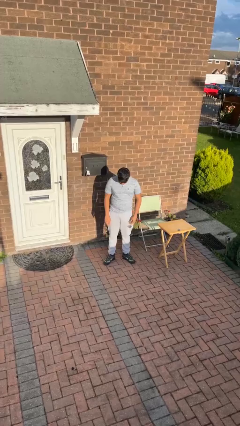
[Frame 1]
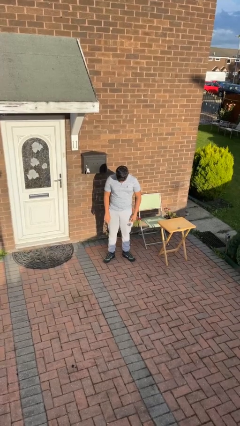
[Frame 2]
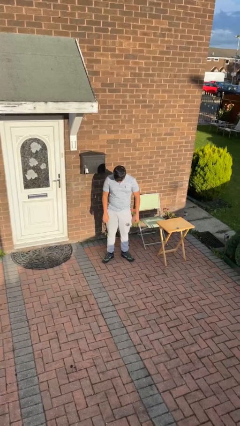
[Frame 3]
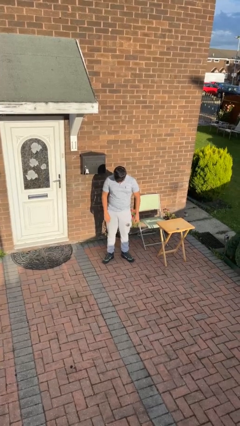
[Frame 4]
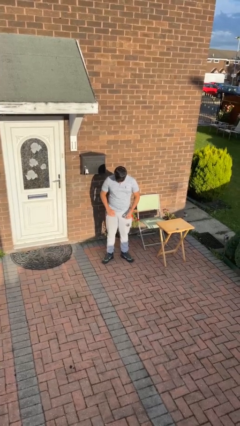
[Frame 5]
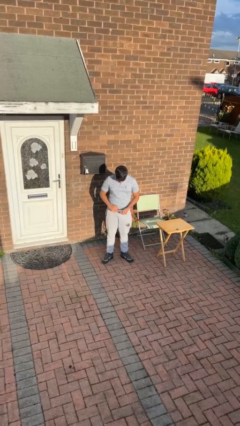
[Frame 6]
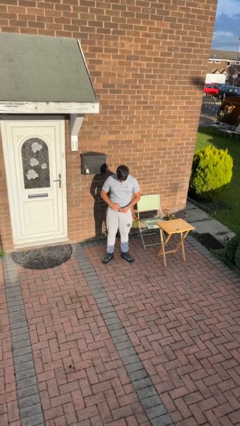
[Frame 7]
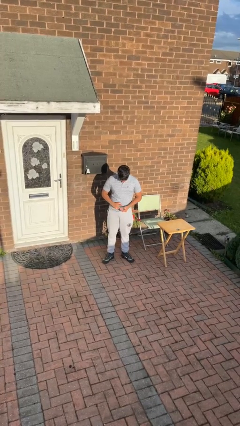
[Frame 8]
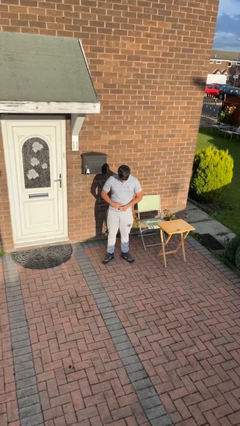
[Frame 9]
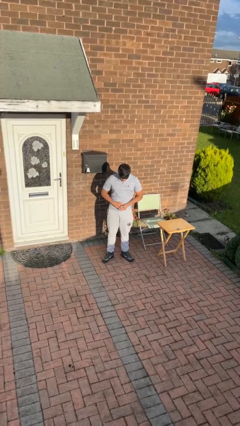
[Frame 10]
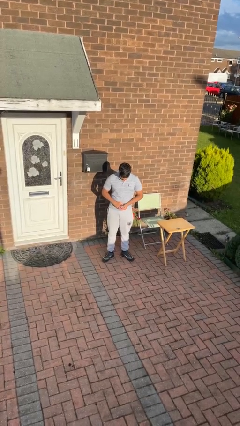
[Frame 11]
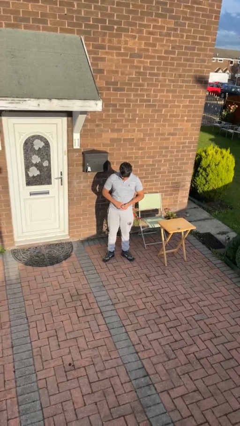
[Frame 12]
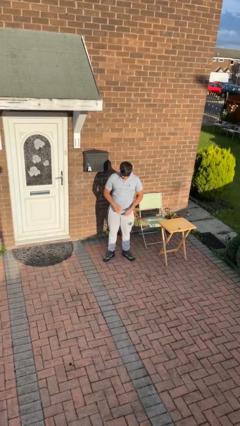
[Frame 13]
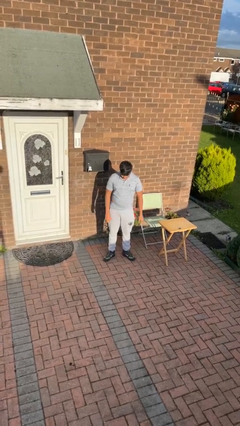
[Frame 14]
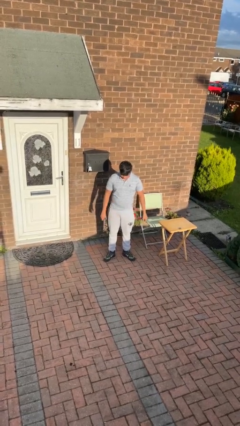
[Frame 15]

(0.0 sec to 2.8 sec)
person puts on ring

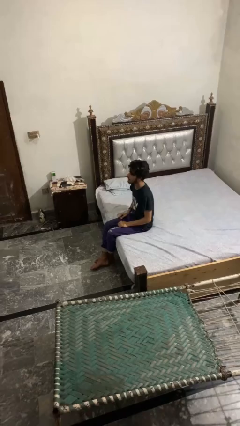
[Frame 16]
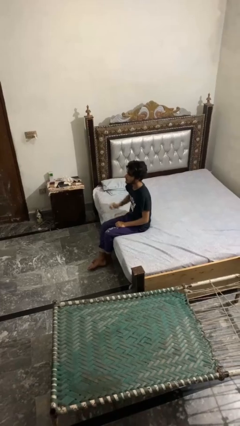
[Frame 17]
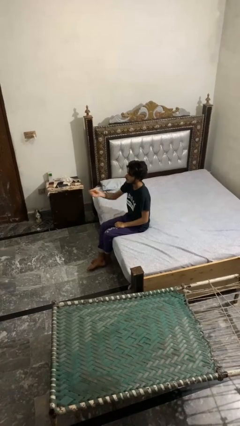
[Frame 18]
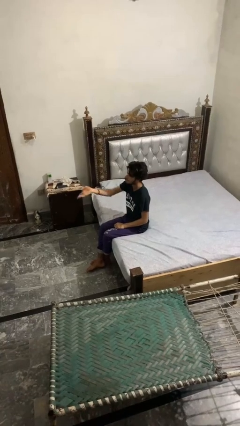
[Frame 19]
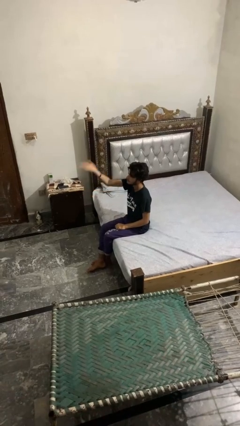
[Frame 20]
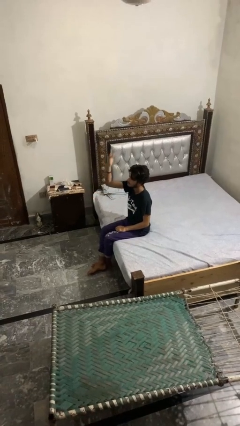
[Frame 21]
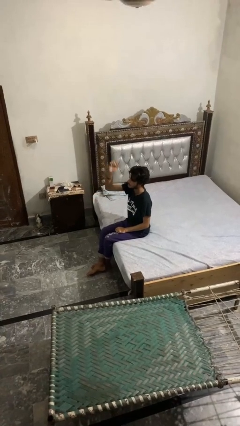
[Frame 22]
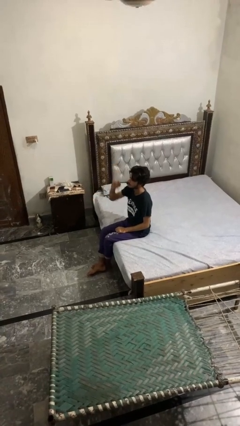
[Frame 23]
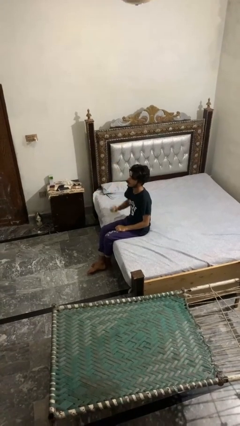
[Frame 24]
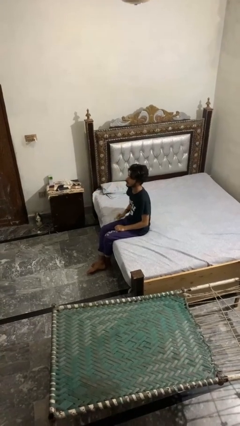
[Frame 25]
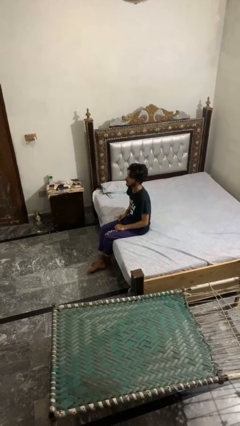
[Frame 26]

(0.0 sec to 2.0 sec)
person gestures swipe up

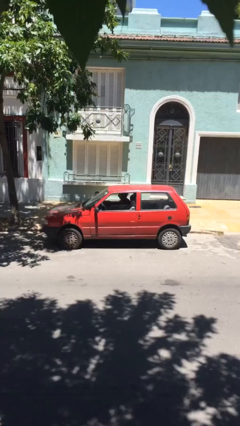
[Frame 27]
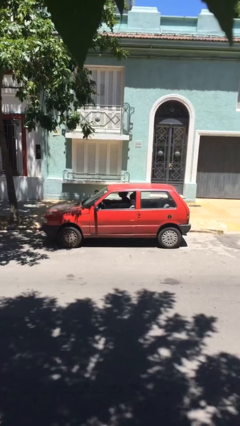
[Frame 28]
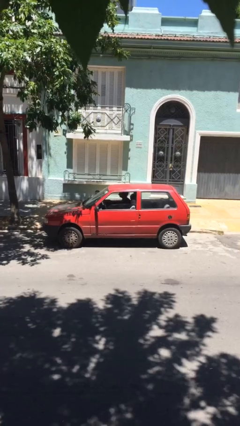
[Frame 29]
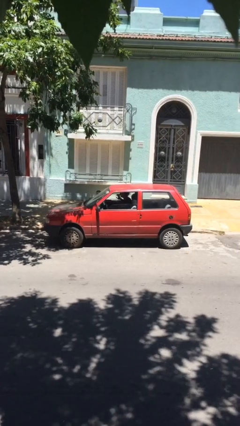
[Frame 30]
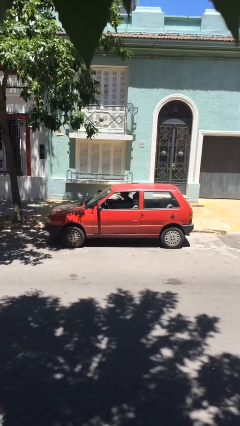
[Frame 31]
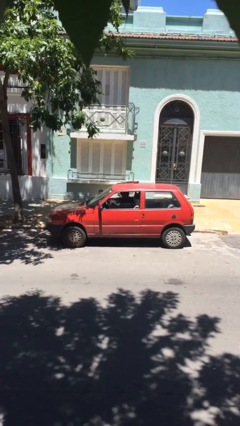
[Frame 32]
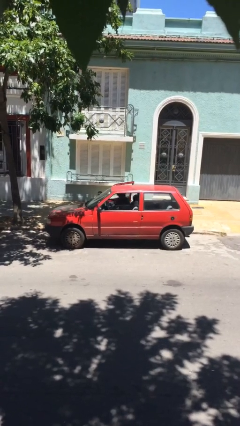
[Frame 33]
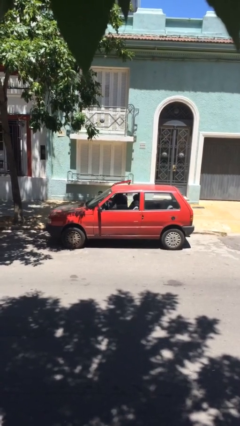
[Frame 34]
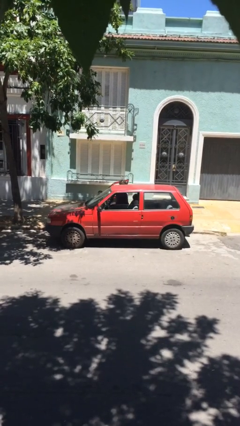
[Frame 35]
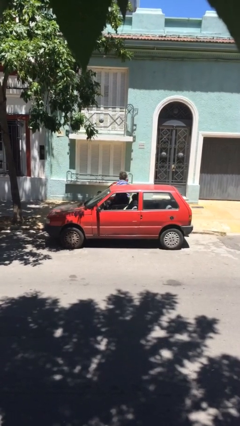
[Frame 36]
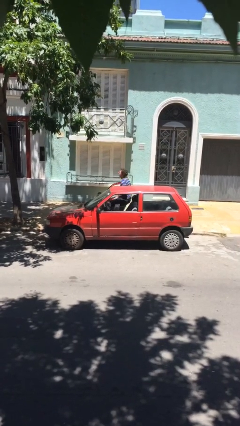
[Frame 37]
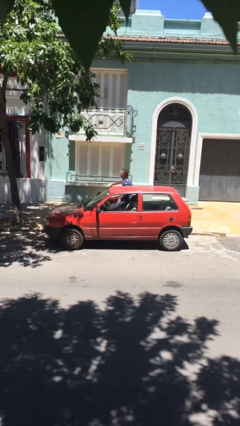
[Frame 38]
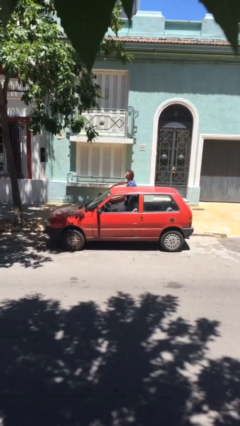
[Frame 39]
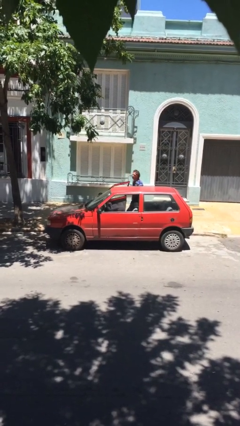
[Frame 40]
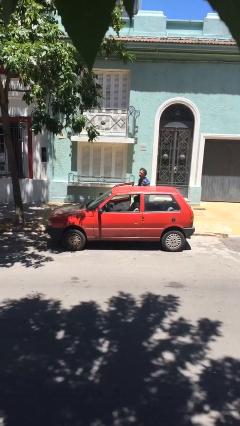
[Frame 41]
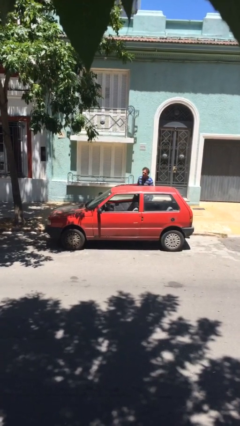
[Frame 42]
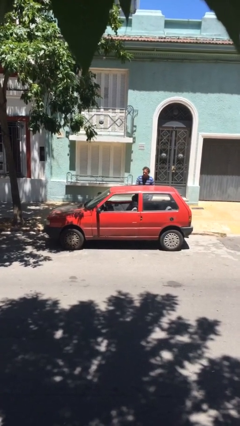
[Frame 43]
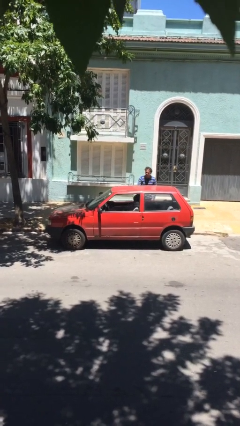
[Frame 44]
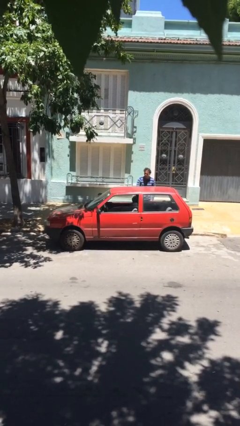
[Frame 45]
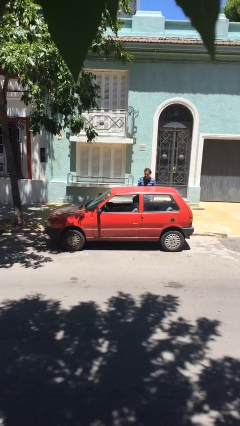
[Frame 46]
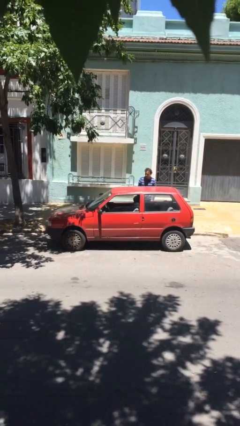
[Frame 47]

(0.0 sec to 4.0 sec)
car drops off person

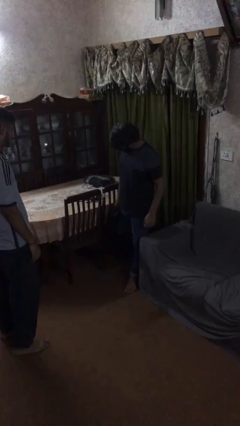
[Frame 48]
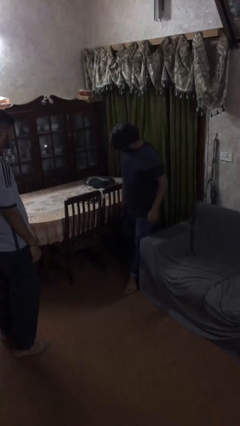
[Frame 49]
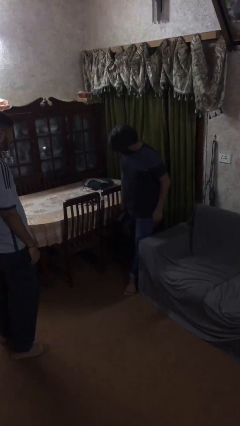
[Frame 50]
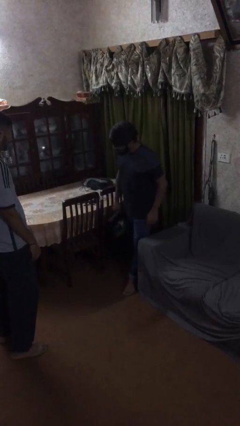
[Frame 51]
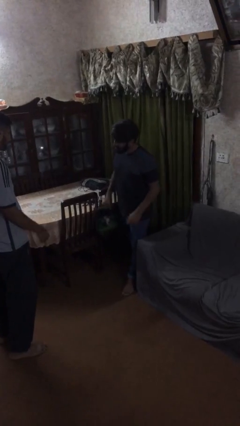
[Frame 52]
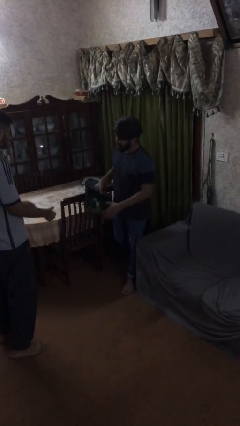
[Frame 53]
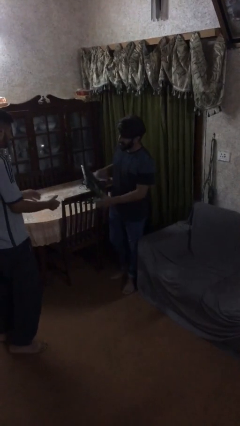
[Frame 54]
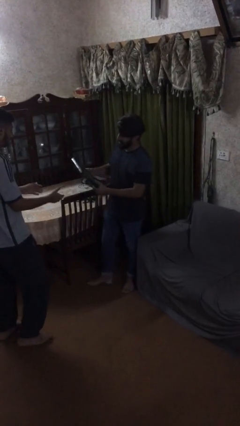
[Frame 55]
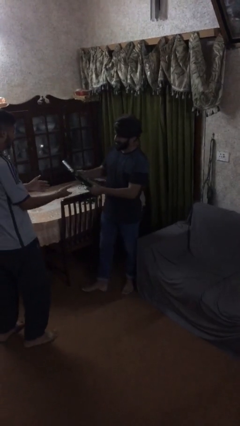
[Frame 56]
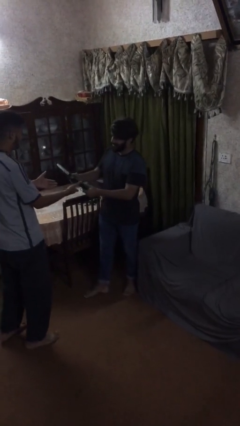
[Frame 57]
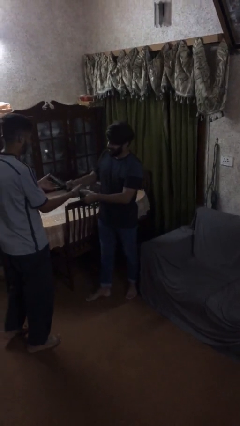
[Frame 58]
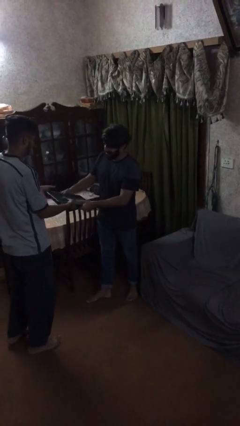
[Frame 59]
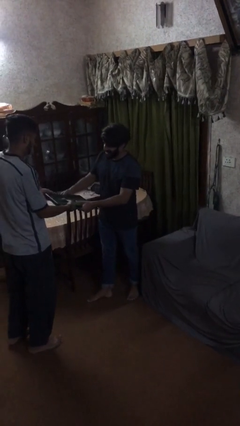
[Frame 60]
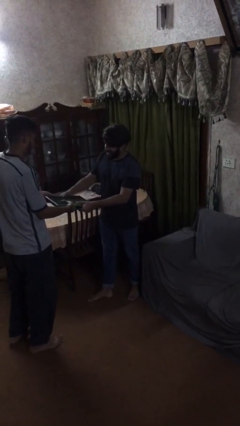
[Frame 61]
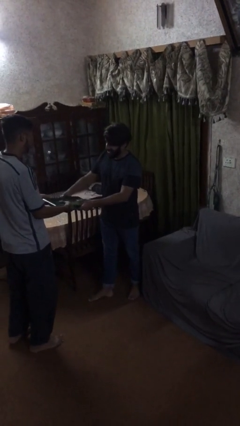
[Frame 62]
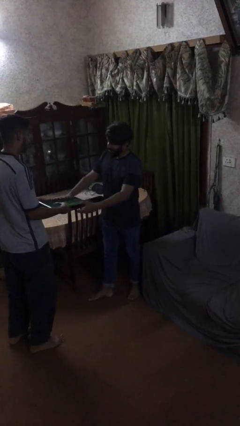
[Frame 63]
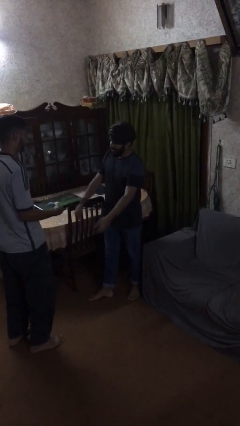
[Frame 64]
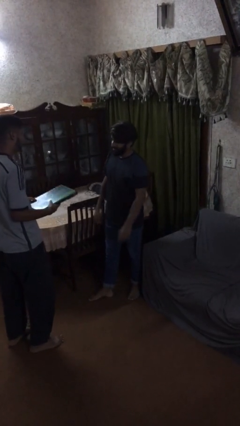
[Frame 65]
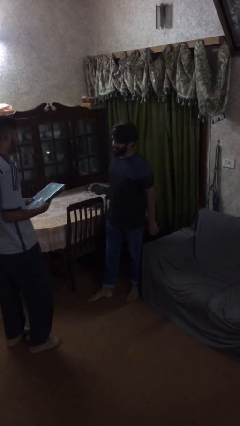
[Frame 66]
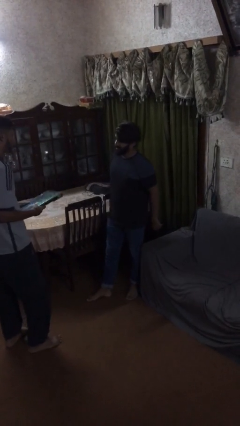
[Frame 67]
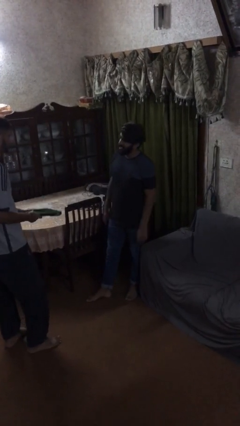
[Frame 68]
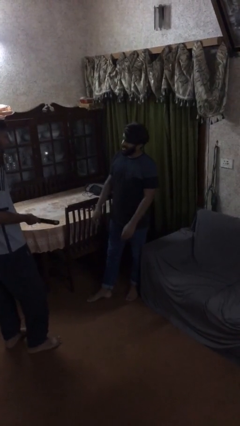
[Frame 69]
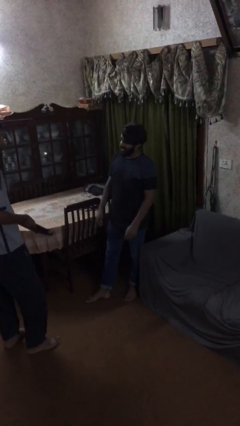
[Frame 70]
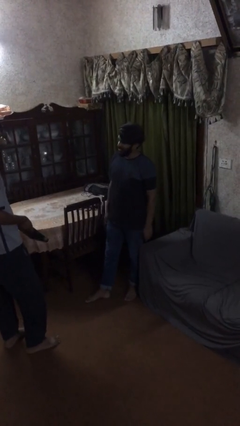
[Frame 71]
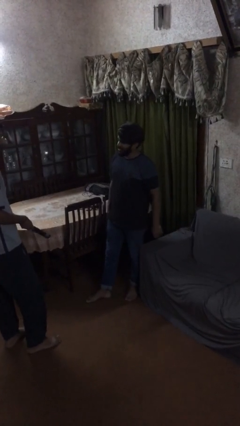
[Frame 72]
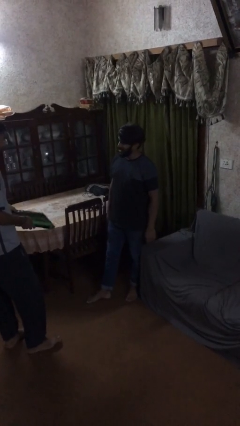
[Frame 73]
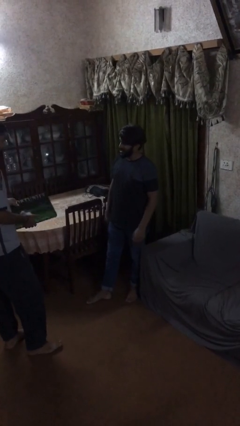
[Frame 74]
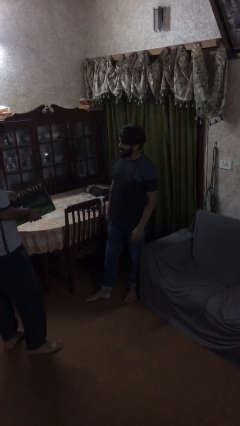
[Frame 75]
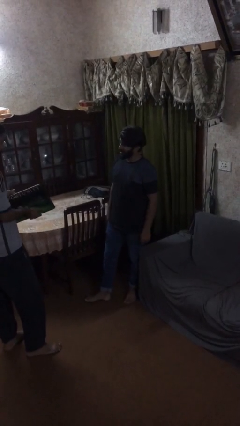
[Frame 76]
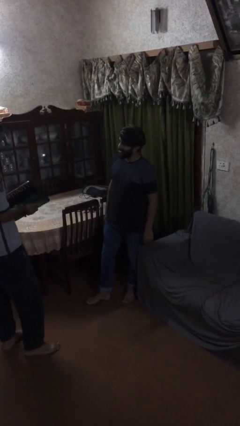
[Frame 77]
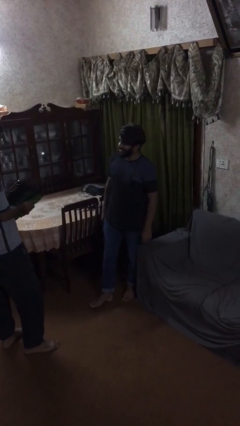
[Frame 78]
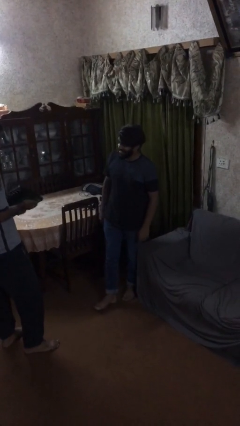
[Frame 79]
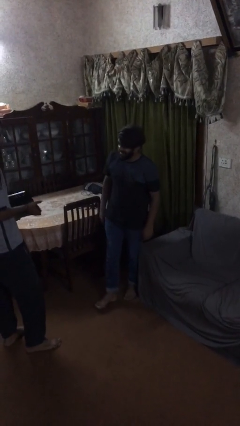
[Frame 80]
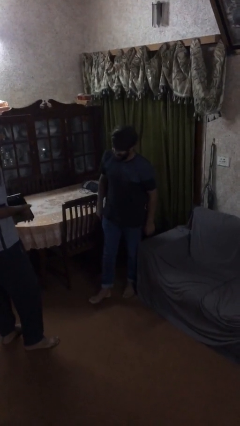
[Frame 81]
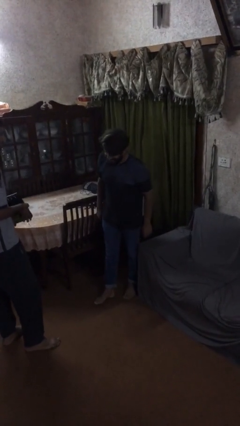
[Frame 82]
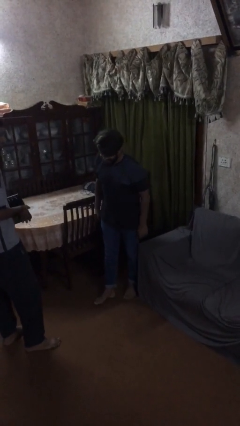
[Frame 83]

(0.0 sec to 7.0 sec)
person transfers object to person

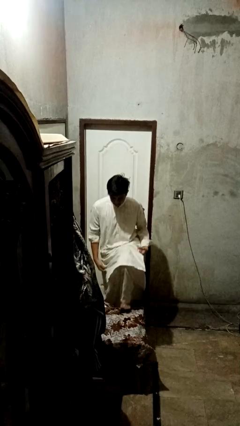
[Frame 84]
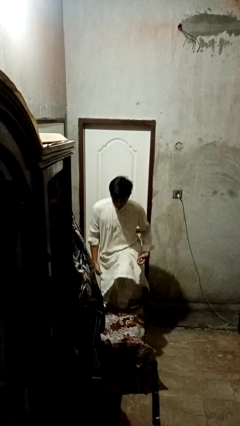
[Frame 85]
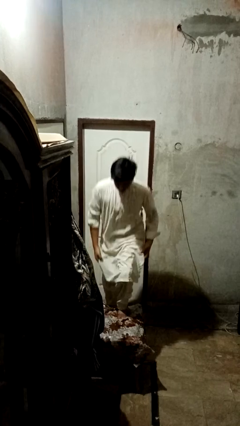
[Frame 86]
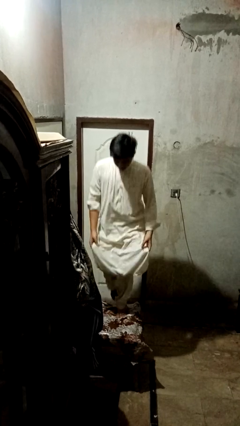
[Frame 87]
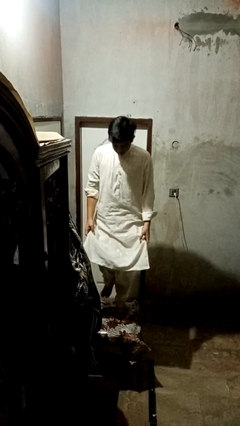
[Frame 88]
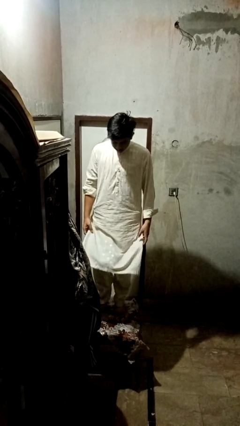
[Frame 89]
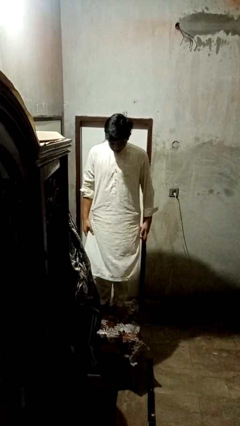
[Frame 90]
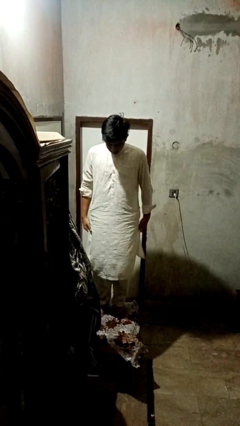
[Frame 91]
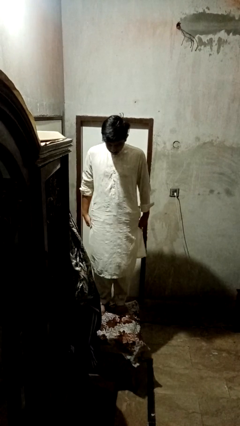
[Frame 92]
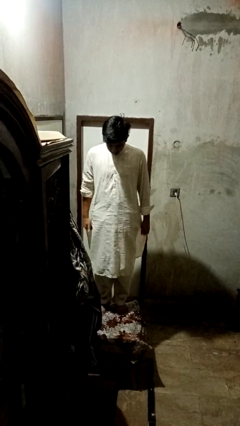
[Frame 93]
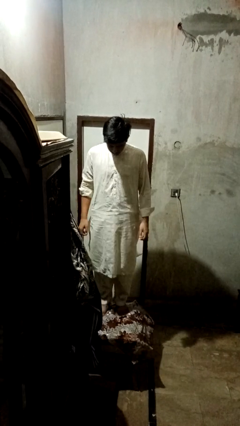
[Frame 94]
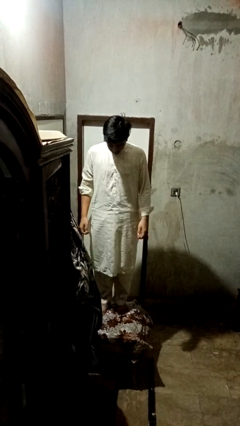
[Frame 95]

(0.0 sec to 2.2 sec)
person climbs on table
